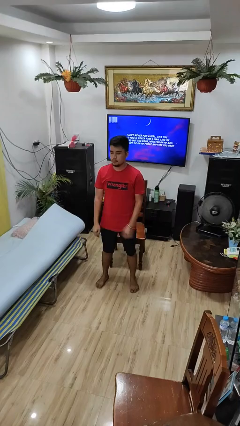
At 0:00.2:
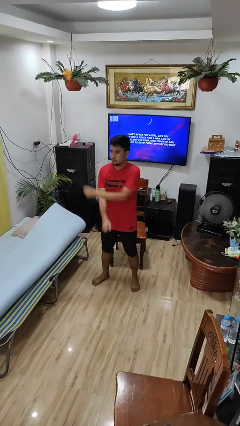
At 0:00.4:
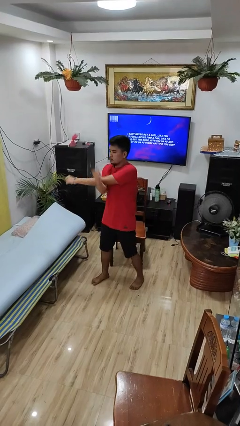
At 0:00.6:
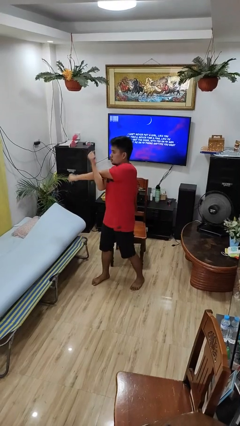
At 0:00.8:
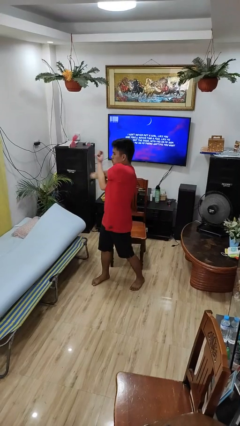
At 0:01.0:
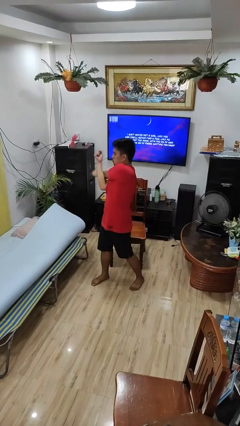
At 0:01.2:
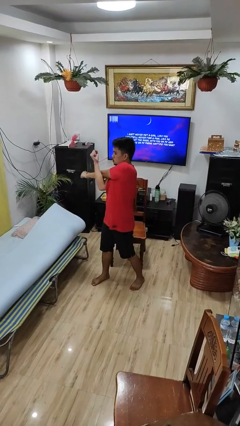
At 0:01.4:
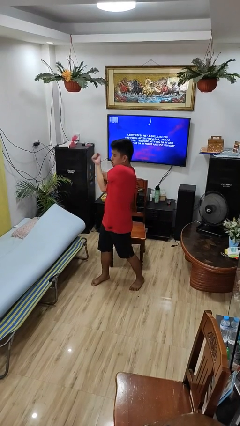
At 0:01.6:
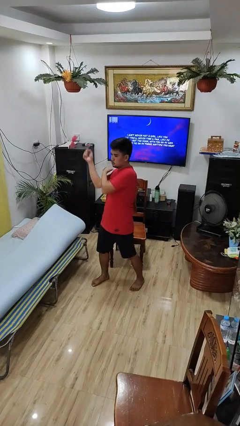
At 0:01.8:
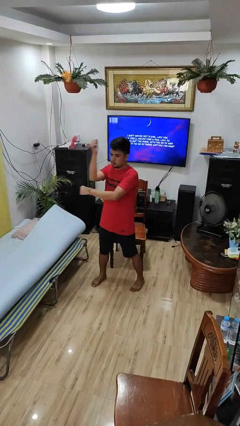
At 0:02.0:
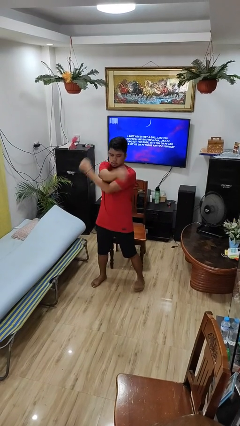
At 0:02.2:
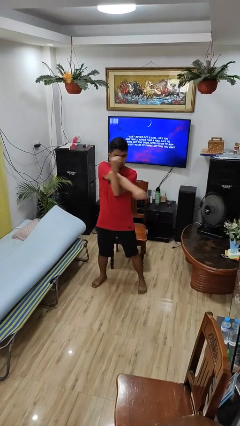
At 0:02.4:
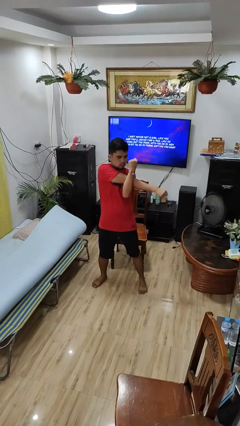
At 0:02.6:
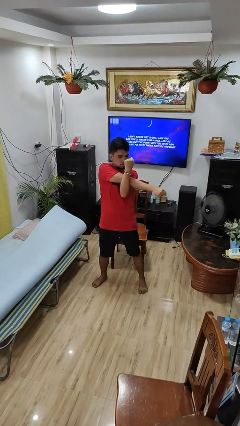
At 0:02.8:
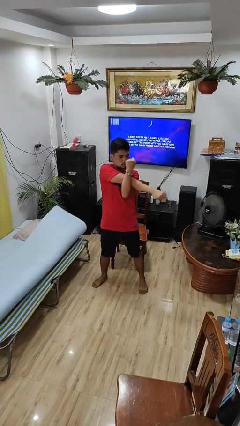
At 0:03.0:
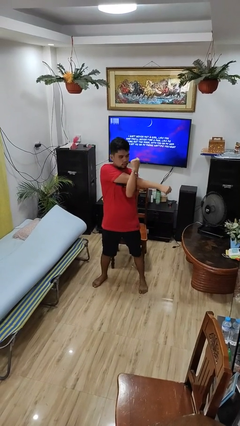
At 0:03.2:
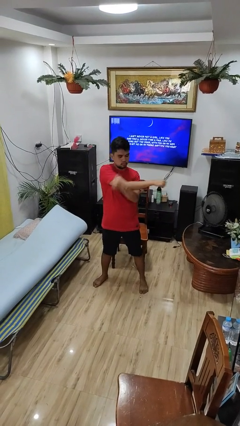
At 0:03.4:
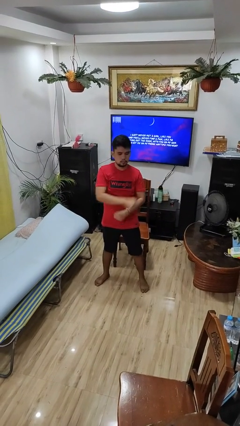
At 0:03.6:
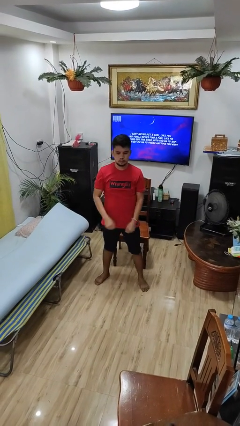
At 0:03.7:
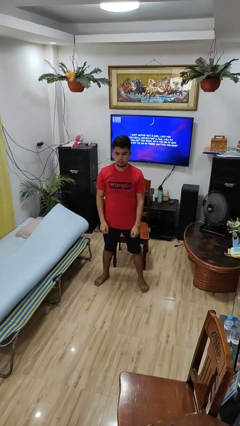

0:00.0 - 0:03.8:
person stretches arms to side

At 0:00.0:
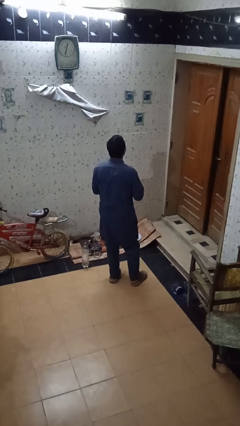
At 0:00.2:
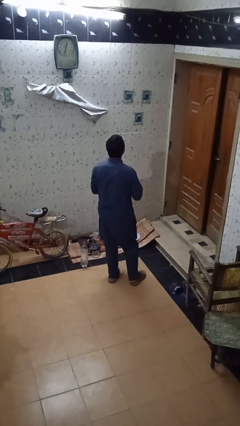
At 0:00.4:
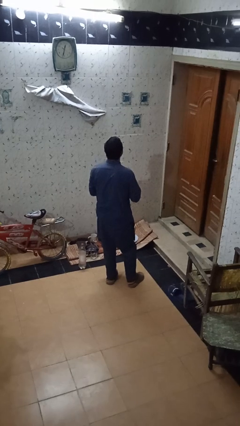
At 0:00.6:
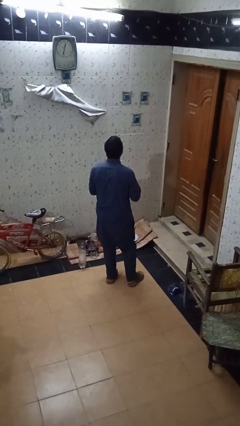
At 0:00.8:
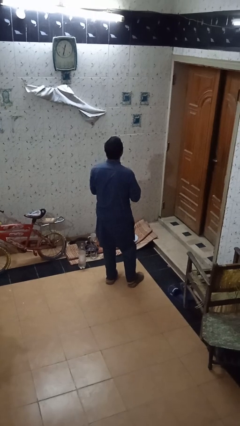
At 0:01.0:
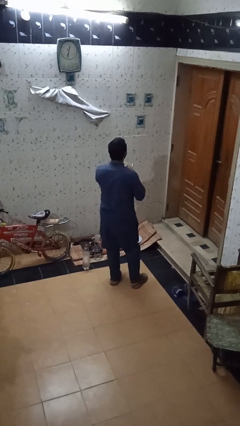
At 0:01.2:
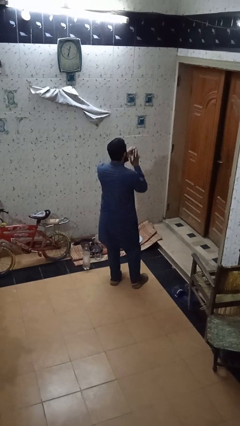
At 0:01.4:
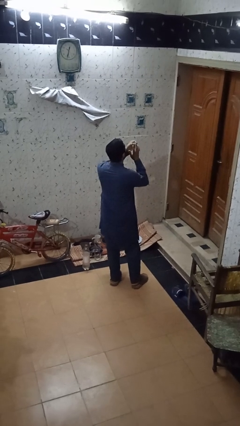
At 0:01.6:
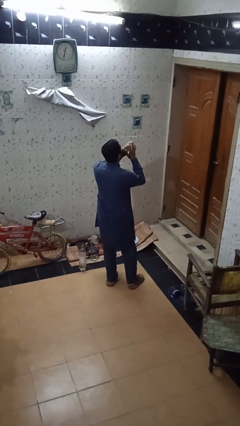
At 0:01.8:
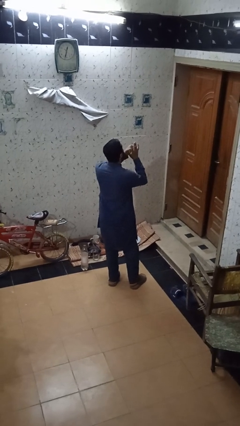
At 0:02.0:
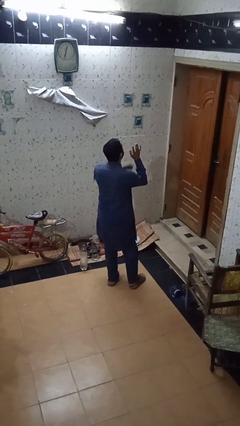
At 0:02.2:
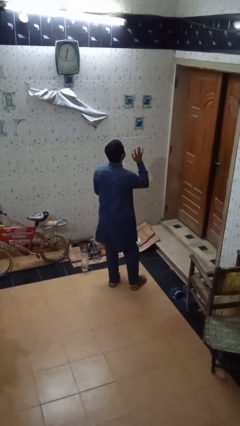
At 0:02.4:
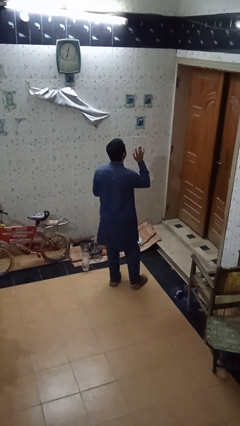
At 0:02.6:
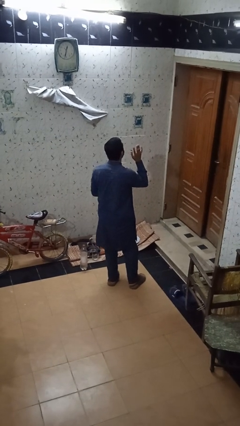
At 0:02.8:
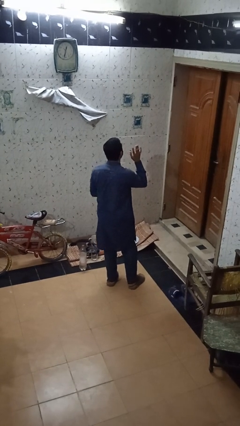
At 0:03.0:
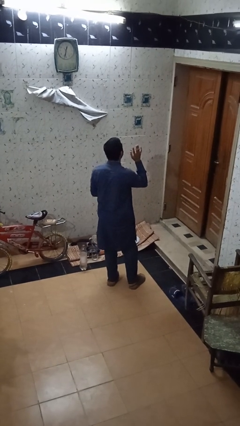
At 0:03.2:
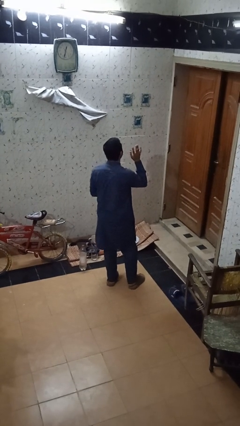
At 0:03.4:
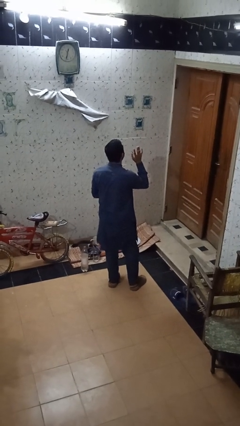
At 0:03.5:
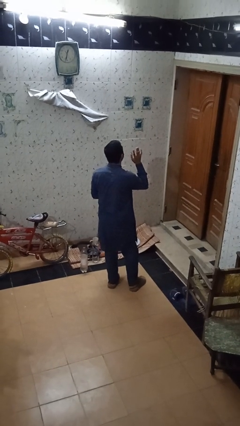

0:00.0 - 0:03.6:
person puts on ring

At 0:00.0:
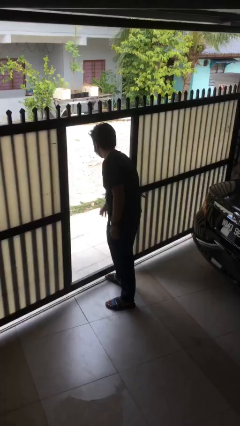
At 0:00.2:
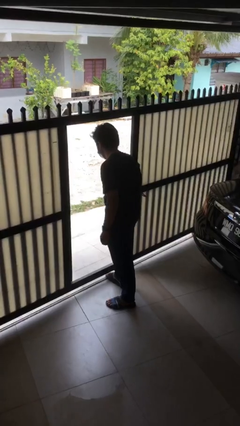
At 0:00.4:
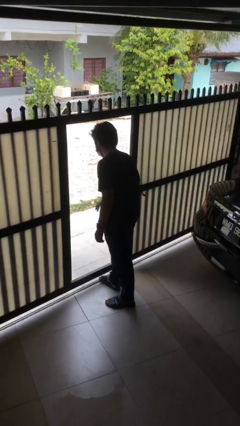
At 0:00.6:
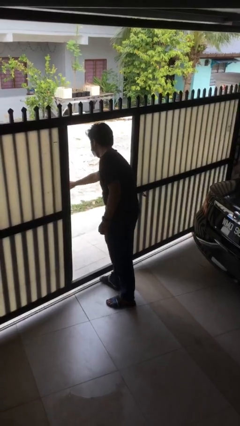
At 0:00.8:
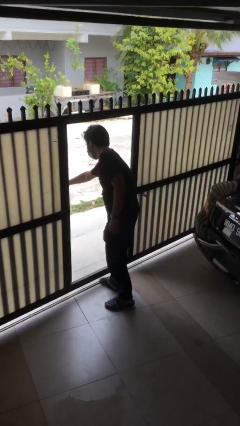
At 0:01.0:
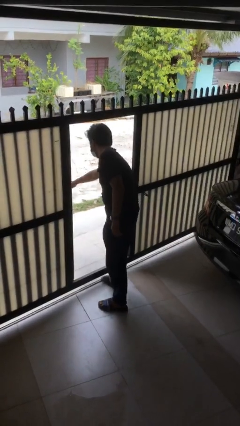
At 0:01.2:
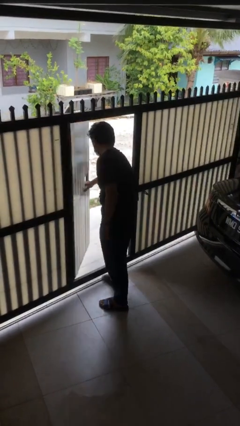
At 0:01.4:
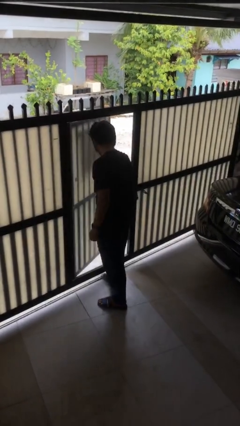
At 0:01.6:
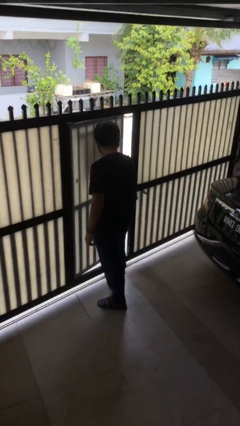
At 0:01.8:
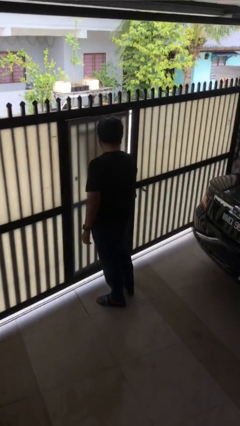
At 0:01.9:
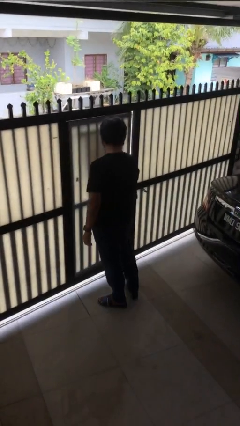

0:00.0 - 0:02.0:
person closes gate

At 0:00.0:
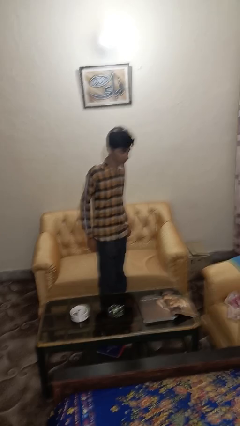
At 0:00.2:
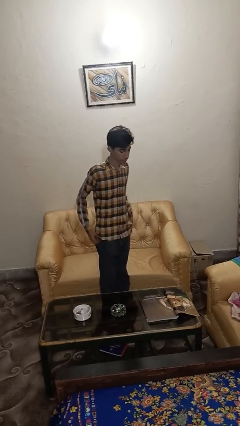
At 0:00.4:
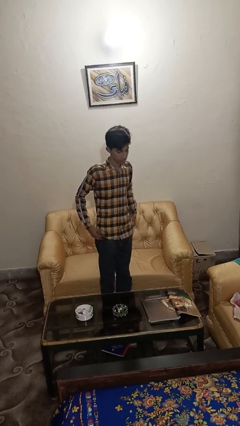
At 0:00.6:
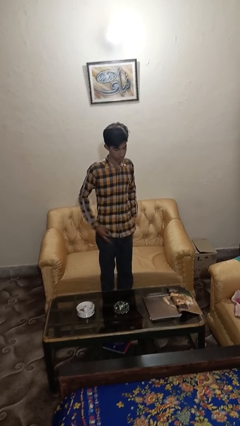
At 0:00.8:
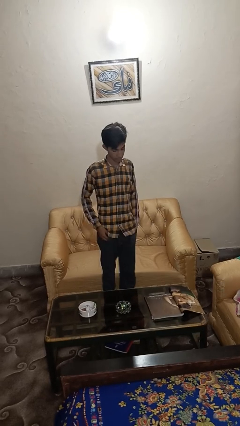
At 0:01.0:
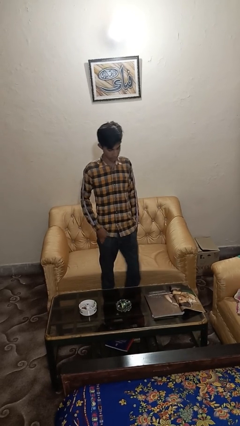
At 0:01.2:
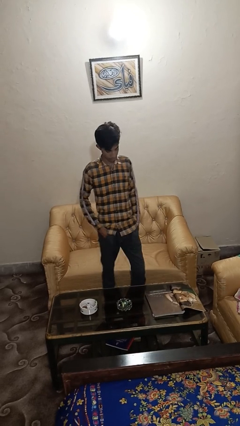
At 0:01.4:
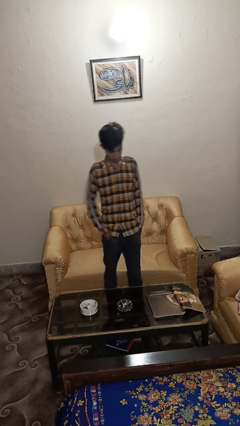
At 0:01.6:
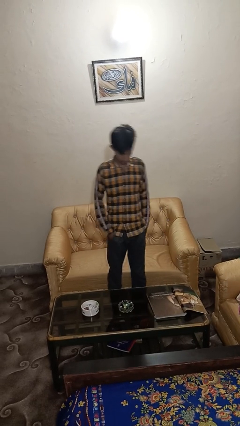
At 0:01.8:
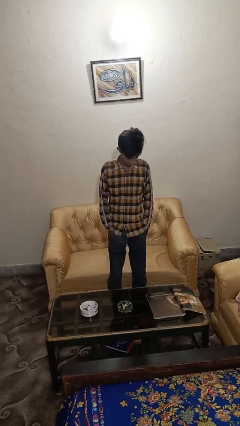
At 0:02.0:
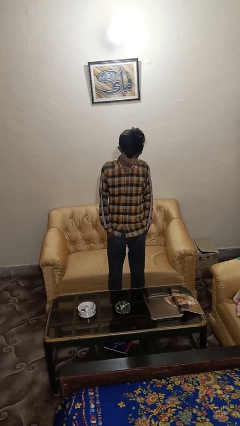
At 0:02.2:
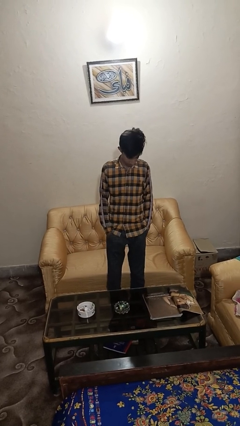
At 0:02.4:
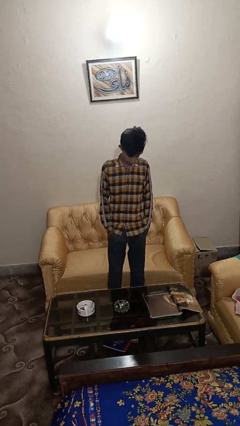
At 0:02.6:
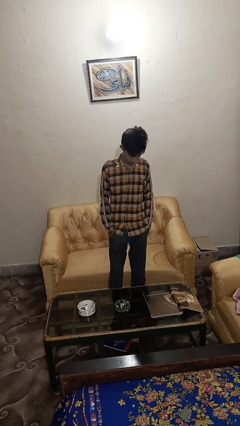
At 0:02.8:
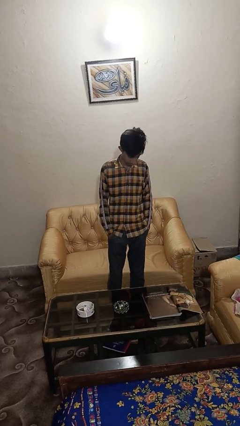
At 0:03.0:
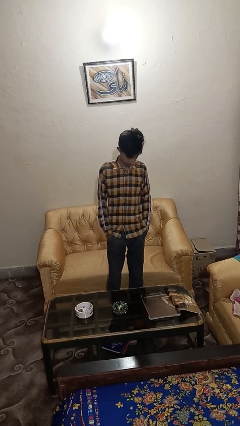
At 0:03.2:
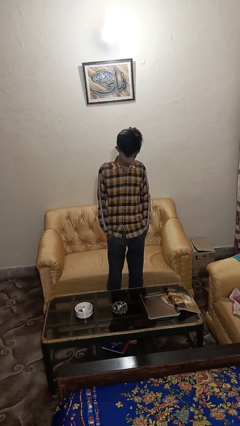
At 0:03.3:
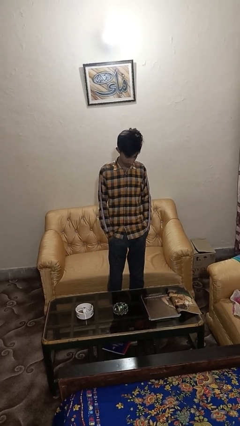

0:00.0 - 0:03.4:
person puts hands in back pockets

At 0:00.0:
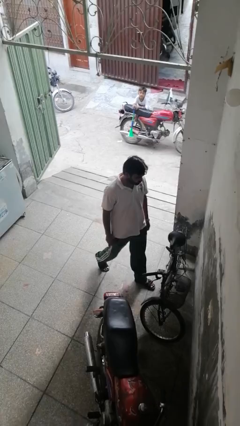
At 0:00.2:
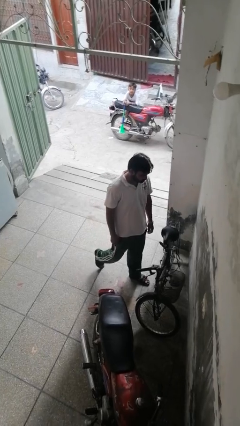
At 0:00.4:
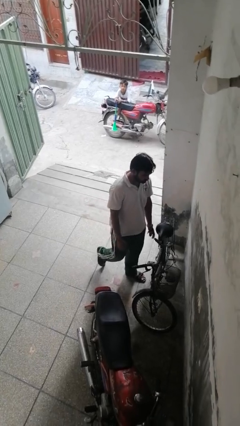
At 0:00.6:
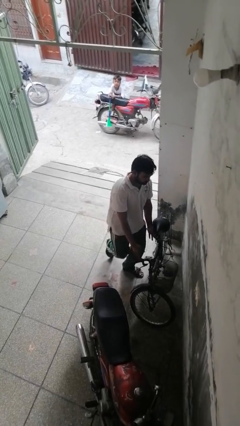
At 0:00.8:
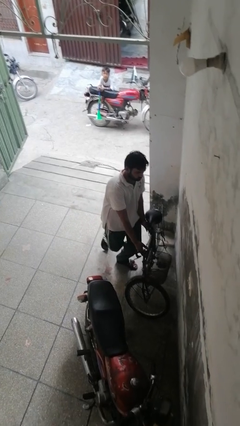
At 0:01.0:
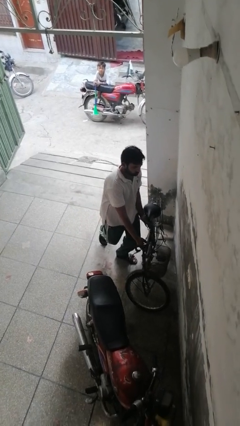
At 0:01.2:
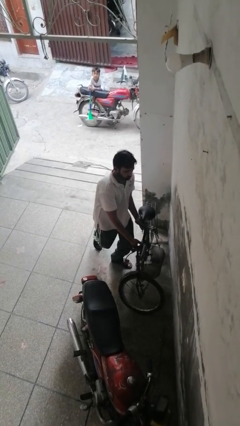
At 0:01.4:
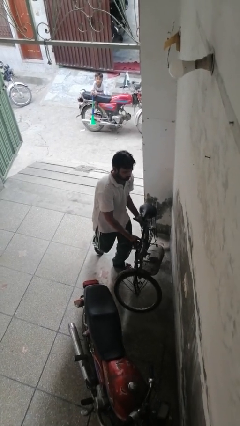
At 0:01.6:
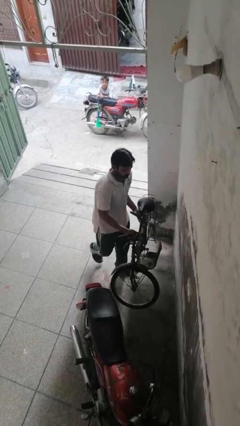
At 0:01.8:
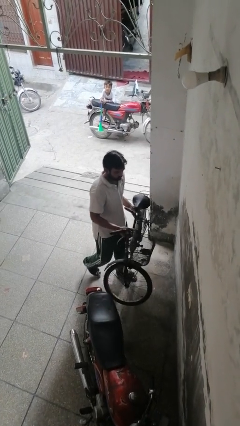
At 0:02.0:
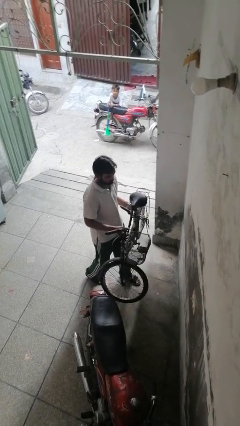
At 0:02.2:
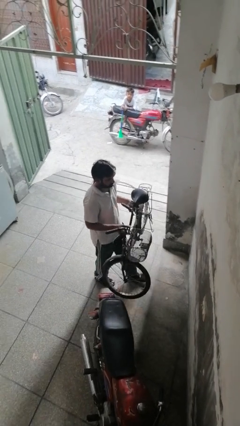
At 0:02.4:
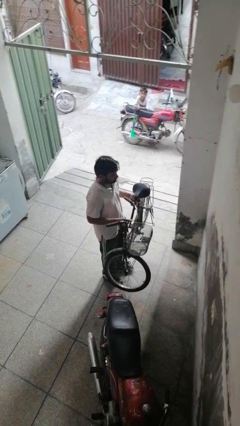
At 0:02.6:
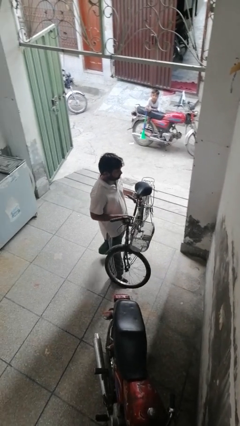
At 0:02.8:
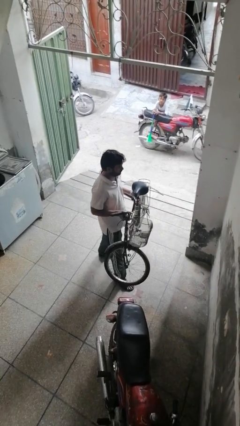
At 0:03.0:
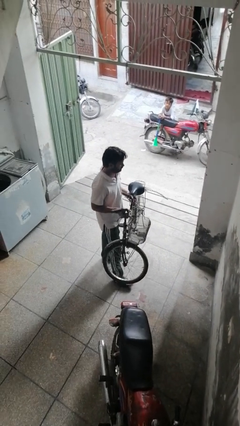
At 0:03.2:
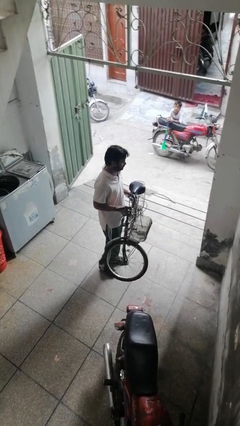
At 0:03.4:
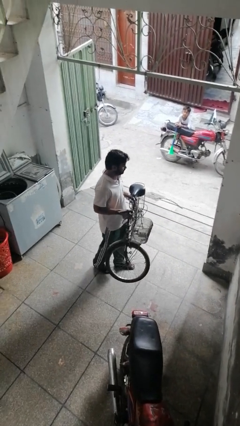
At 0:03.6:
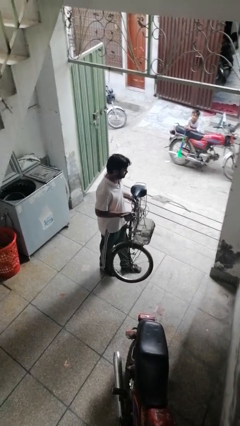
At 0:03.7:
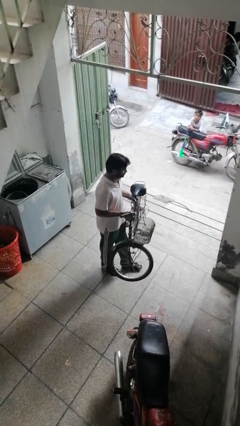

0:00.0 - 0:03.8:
person carries bicycle

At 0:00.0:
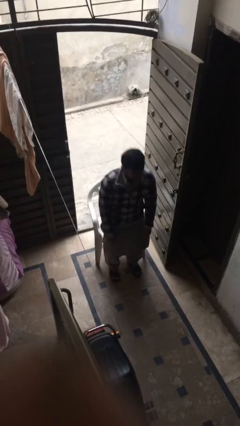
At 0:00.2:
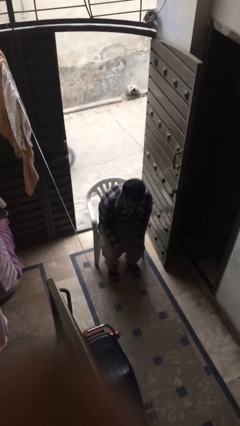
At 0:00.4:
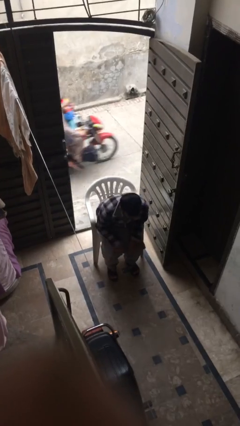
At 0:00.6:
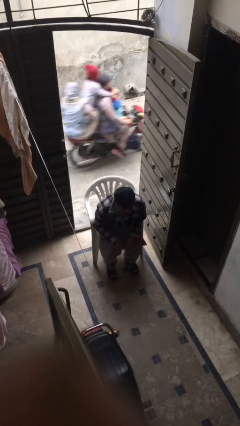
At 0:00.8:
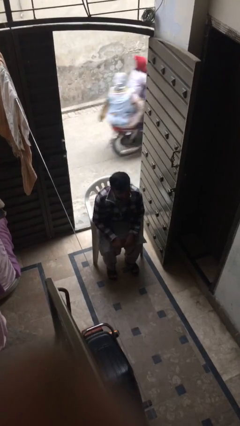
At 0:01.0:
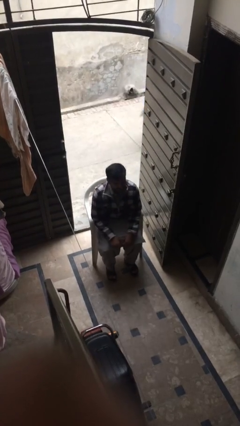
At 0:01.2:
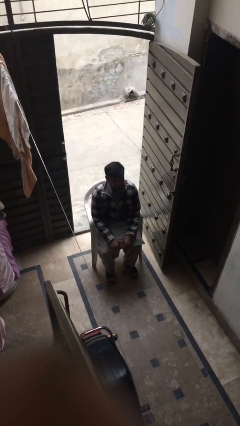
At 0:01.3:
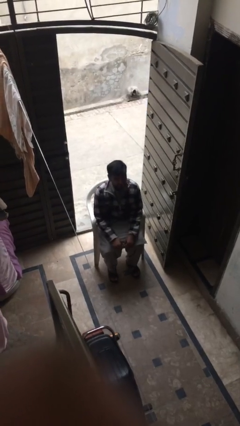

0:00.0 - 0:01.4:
person sits down
